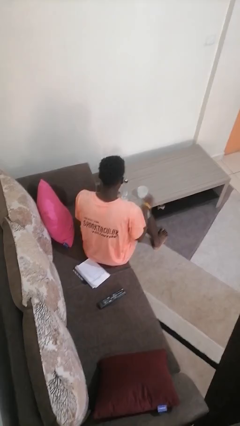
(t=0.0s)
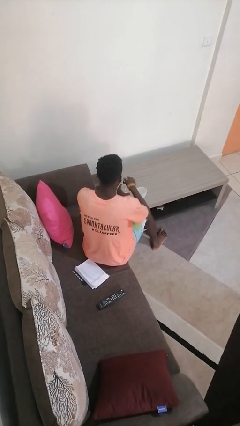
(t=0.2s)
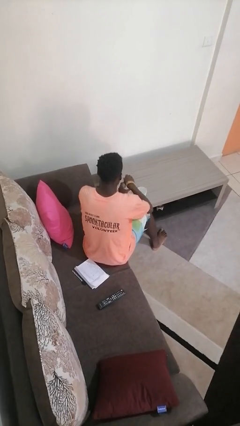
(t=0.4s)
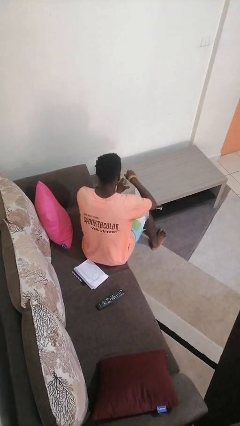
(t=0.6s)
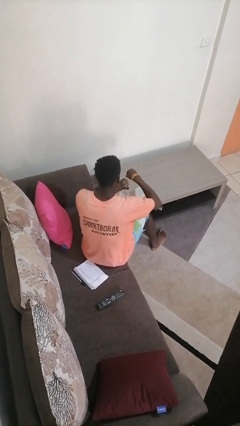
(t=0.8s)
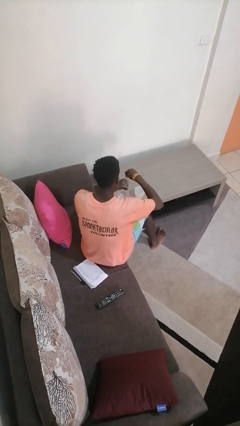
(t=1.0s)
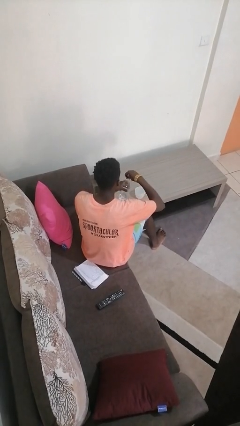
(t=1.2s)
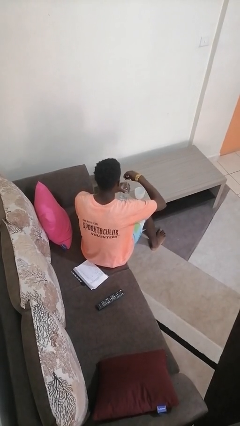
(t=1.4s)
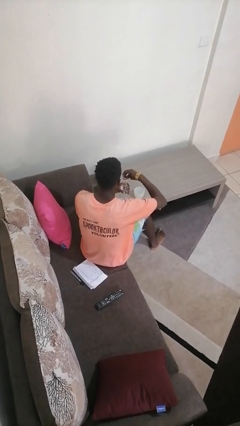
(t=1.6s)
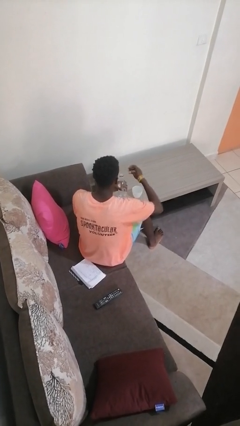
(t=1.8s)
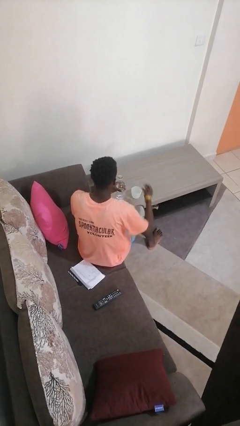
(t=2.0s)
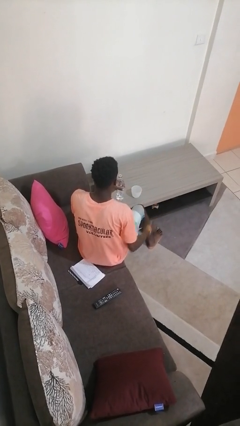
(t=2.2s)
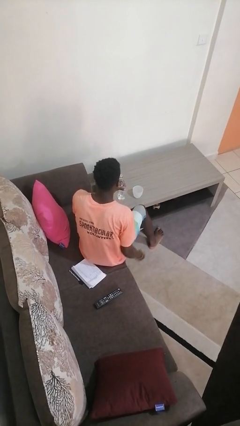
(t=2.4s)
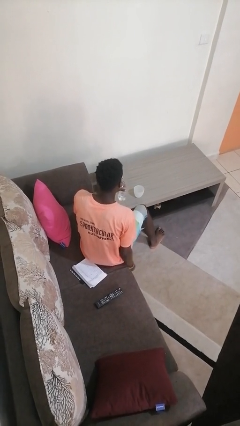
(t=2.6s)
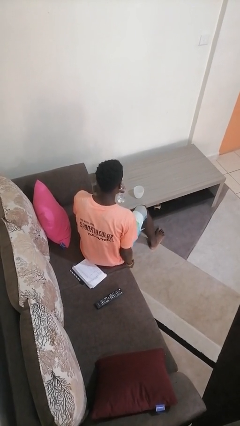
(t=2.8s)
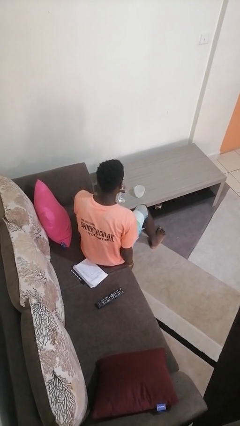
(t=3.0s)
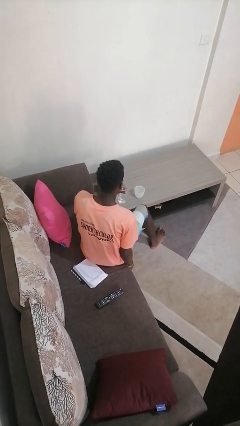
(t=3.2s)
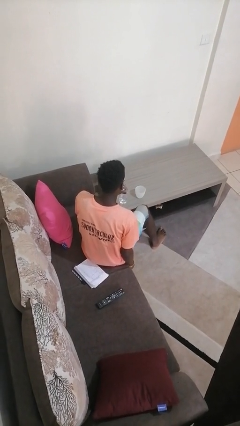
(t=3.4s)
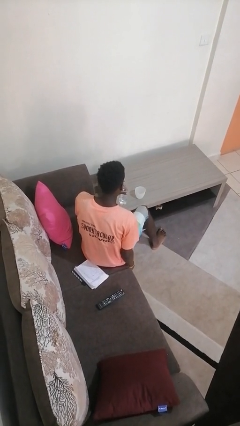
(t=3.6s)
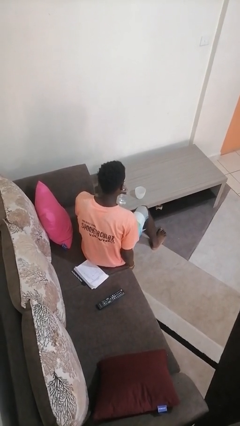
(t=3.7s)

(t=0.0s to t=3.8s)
person unscrews lid from bottle

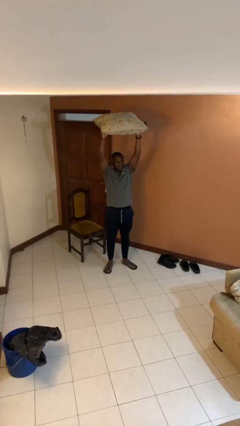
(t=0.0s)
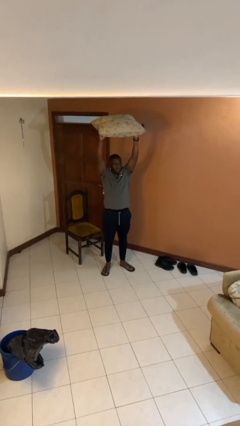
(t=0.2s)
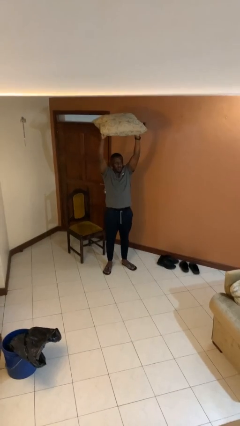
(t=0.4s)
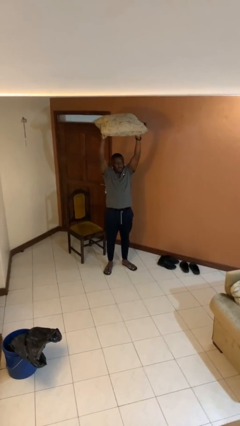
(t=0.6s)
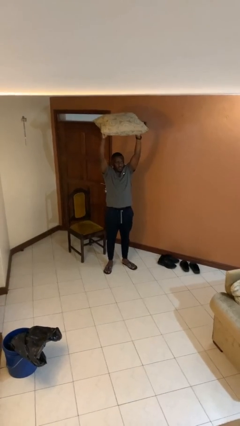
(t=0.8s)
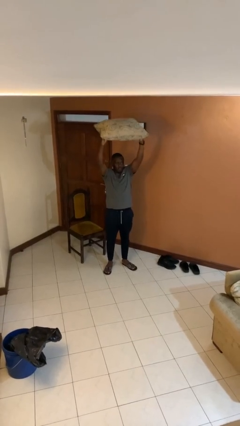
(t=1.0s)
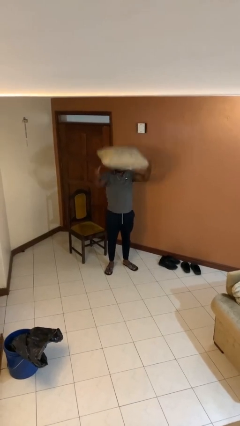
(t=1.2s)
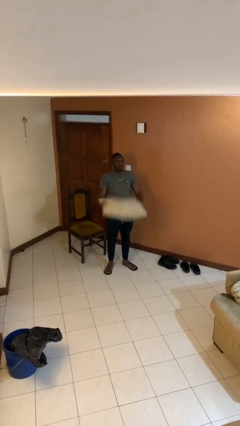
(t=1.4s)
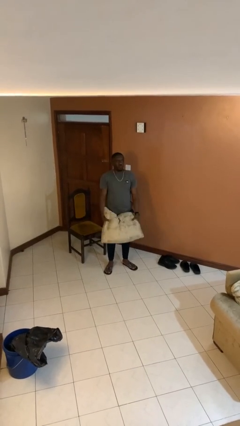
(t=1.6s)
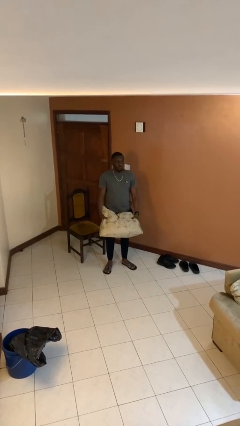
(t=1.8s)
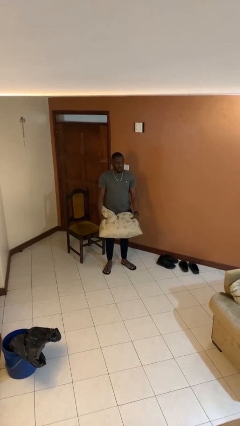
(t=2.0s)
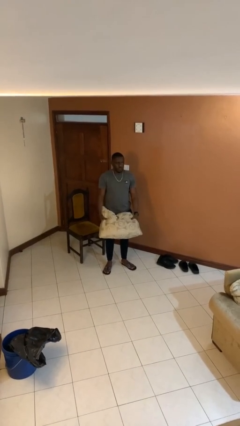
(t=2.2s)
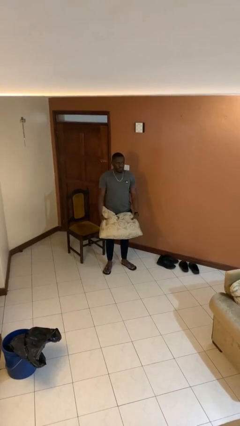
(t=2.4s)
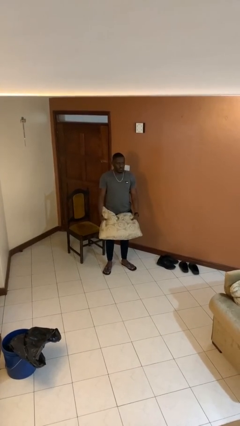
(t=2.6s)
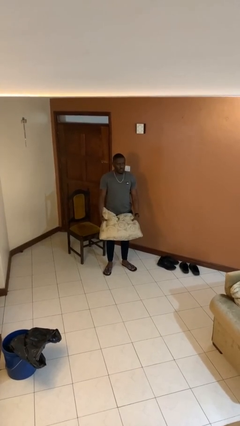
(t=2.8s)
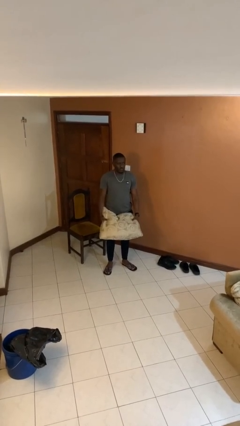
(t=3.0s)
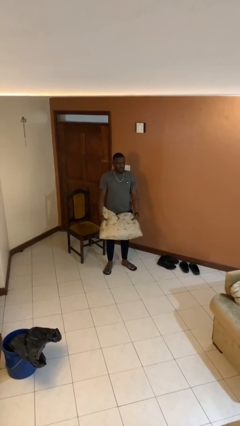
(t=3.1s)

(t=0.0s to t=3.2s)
person drops object

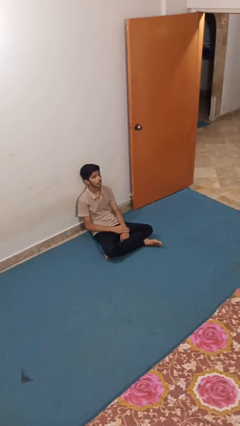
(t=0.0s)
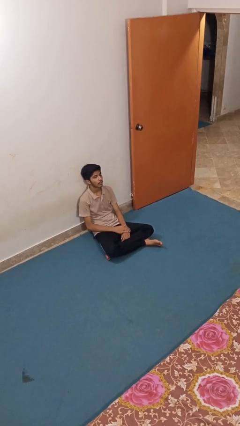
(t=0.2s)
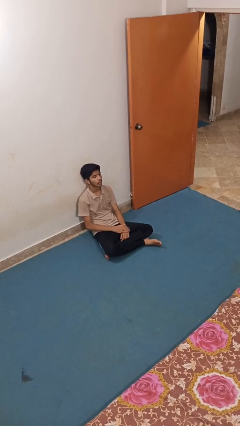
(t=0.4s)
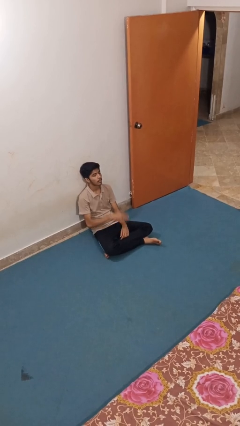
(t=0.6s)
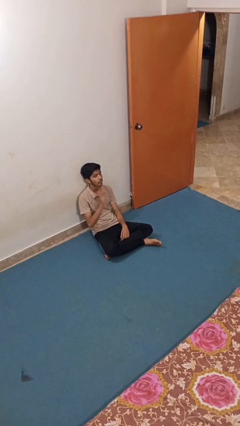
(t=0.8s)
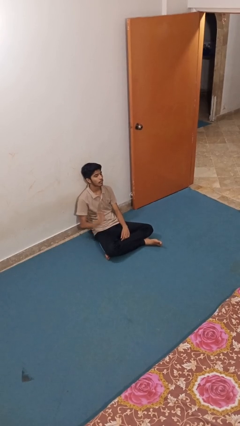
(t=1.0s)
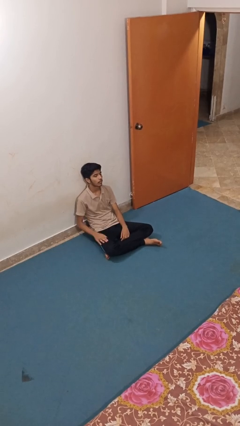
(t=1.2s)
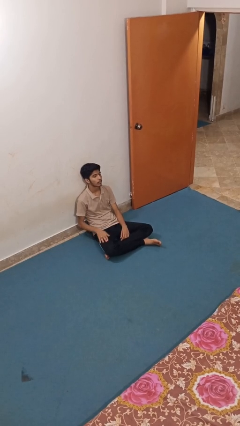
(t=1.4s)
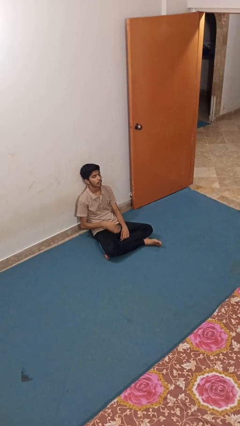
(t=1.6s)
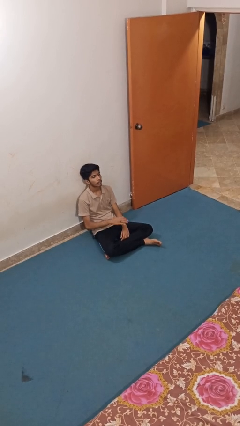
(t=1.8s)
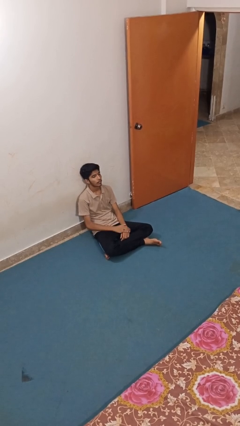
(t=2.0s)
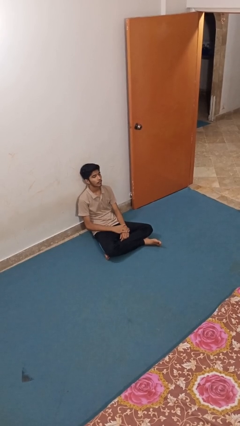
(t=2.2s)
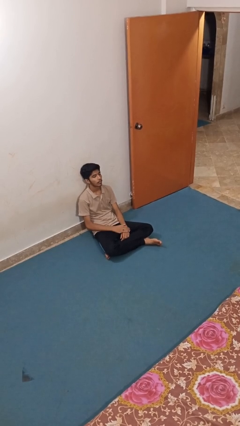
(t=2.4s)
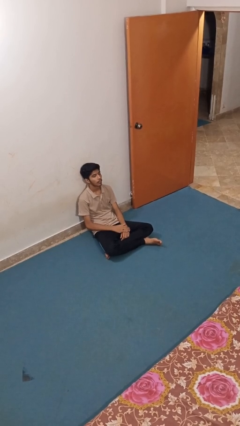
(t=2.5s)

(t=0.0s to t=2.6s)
person slaps hands on thighs

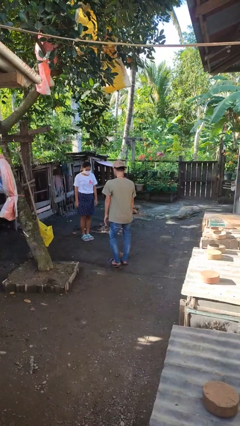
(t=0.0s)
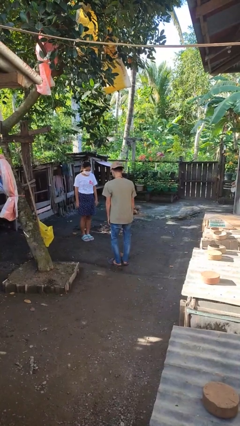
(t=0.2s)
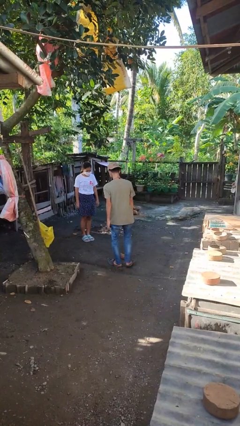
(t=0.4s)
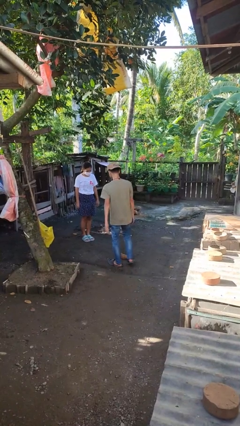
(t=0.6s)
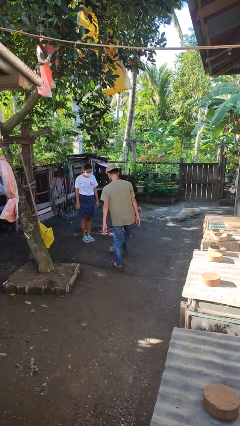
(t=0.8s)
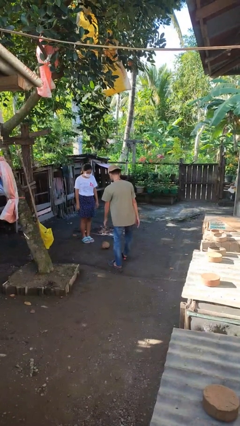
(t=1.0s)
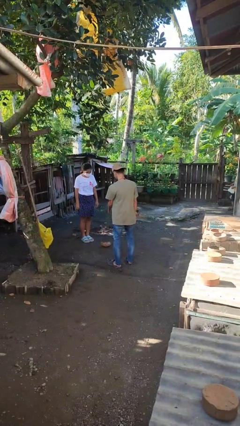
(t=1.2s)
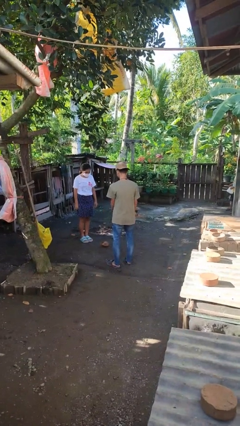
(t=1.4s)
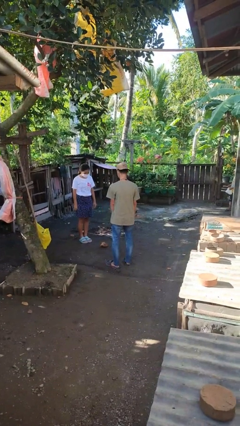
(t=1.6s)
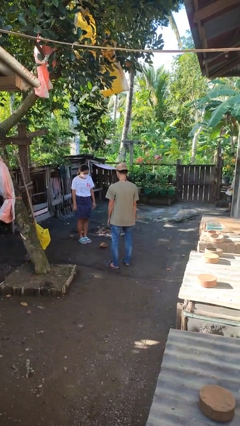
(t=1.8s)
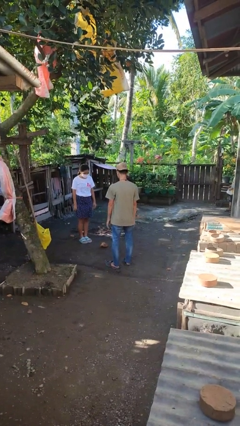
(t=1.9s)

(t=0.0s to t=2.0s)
person kicks object to person

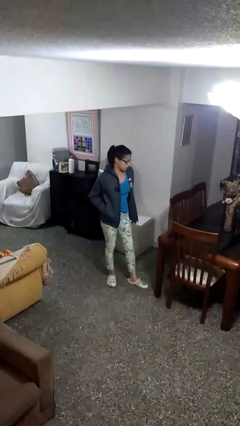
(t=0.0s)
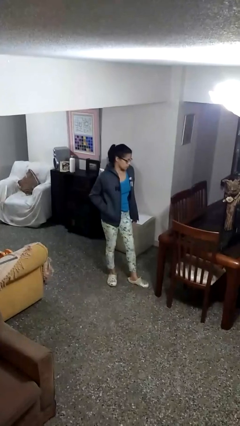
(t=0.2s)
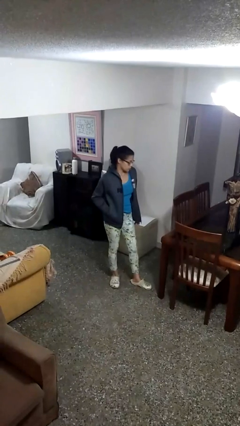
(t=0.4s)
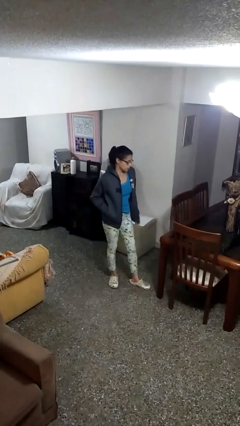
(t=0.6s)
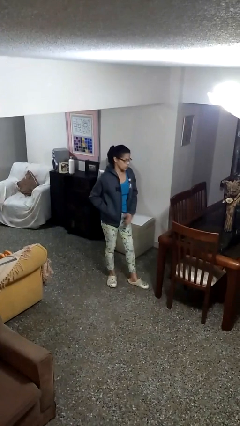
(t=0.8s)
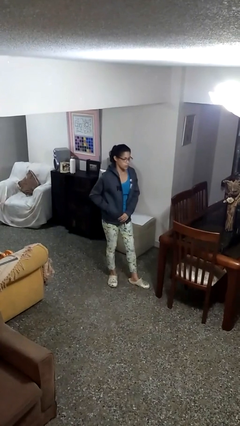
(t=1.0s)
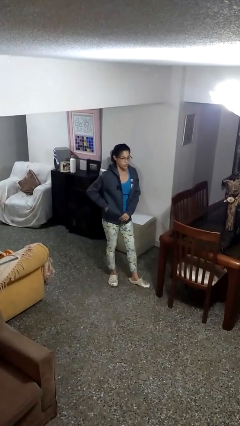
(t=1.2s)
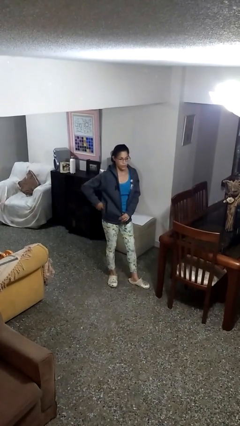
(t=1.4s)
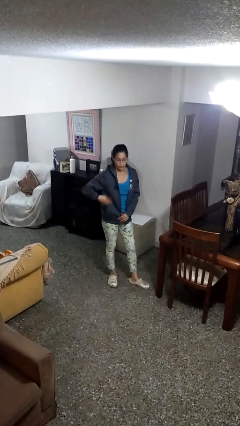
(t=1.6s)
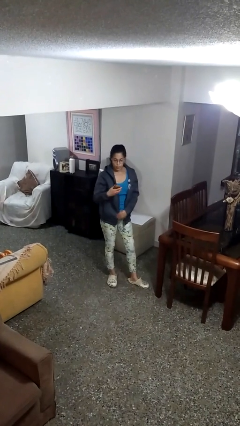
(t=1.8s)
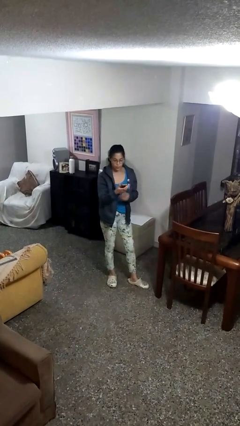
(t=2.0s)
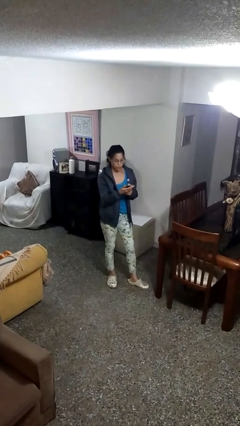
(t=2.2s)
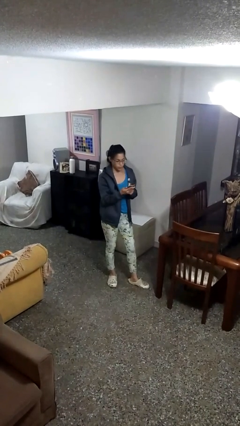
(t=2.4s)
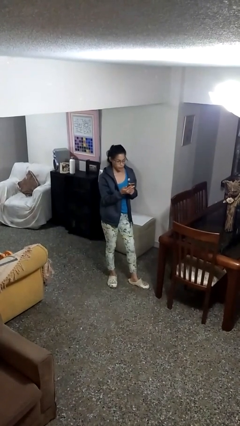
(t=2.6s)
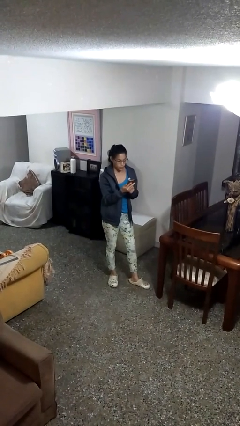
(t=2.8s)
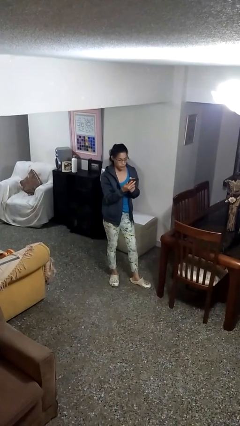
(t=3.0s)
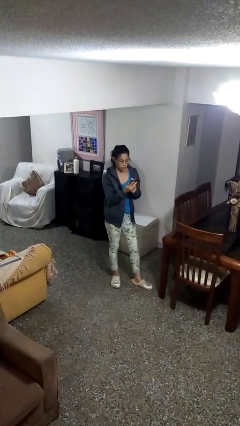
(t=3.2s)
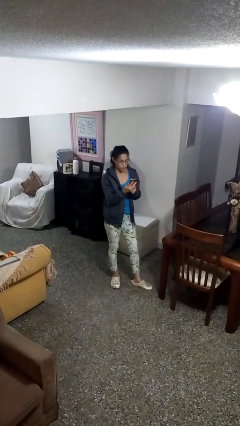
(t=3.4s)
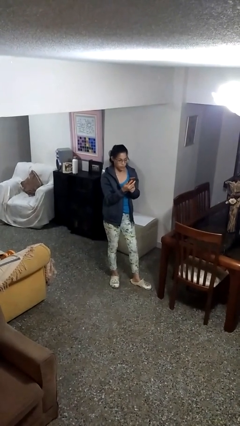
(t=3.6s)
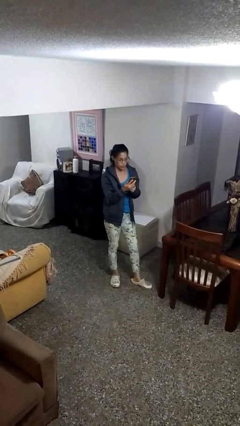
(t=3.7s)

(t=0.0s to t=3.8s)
person takes phone from pocket

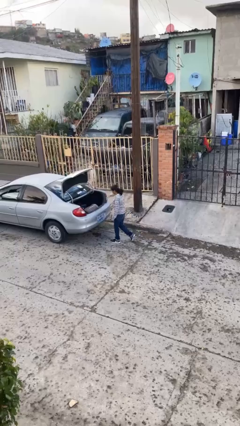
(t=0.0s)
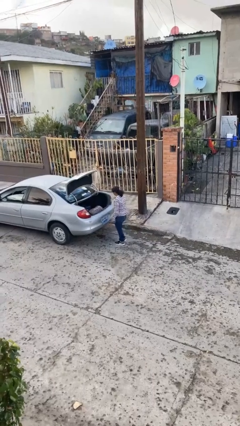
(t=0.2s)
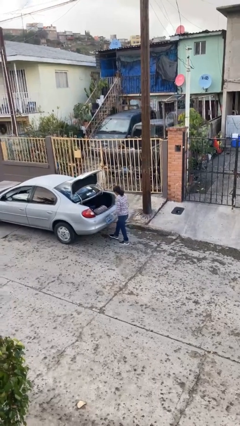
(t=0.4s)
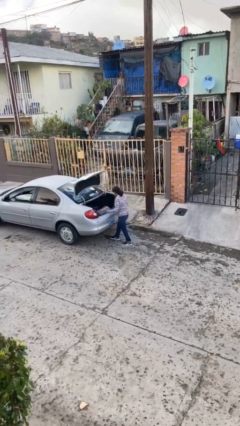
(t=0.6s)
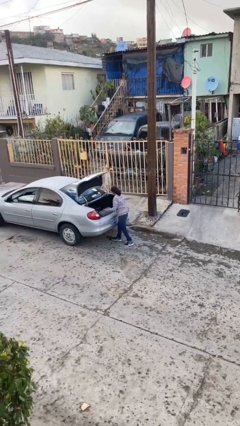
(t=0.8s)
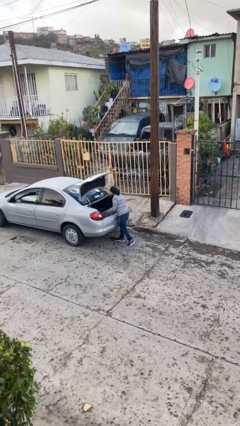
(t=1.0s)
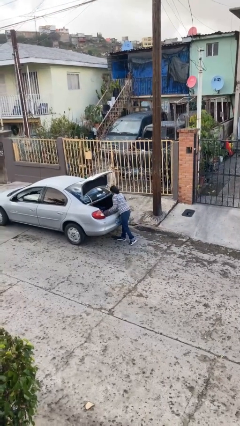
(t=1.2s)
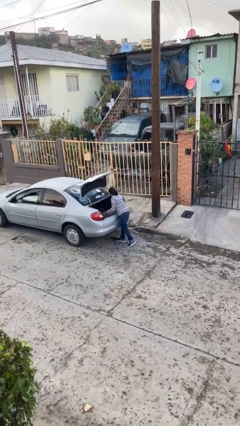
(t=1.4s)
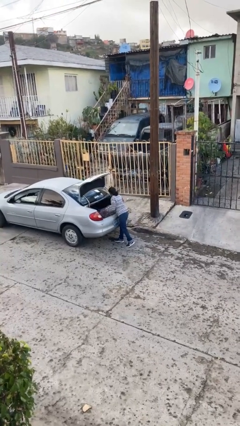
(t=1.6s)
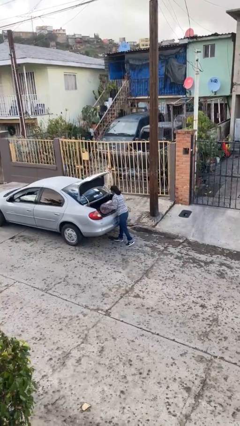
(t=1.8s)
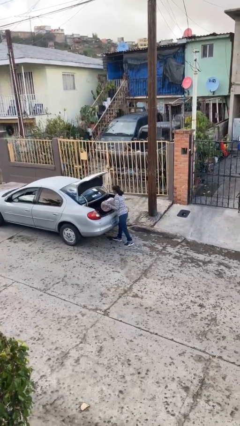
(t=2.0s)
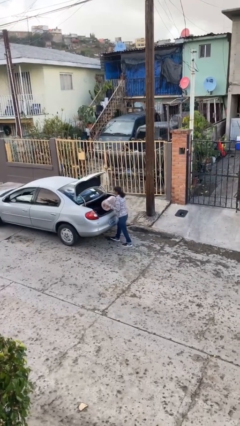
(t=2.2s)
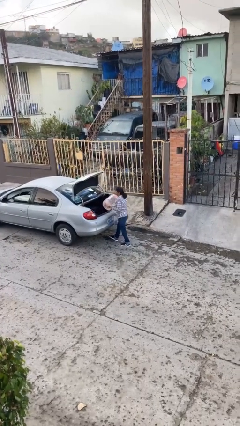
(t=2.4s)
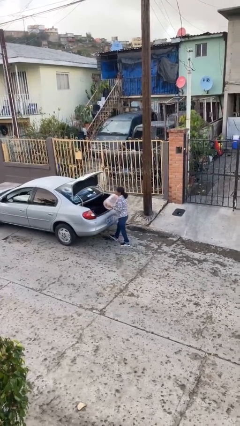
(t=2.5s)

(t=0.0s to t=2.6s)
person unloads car
